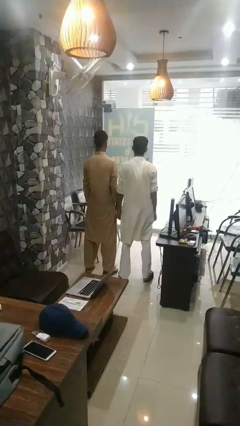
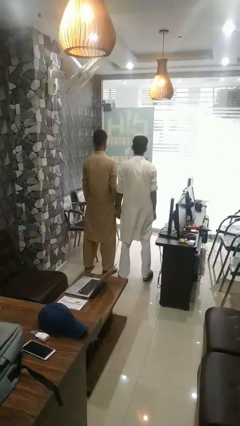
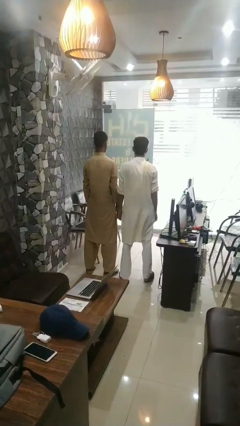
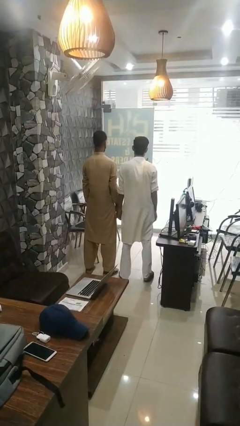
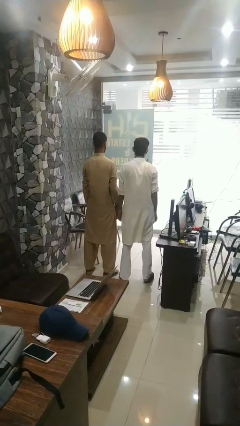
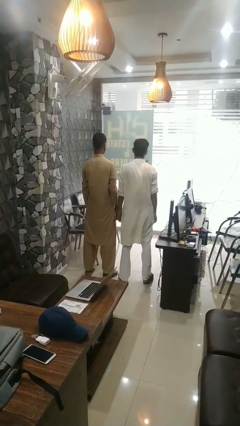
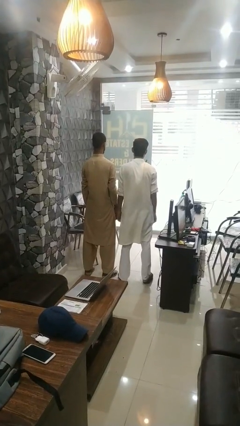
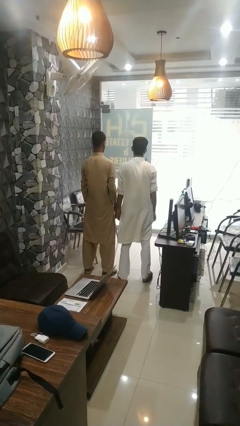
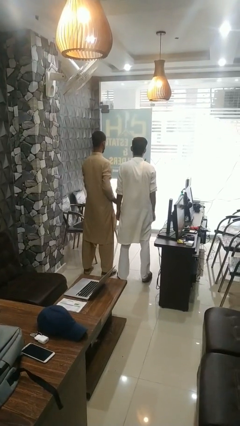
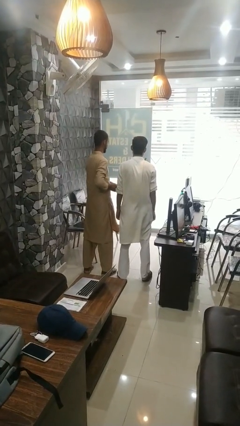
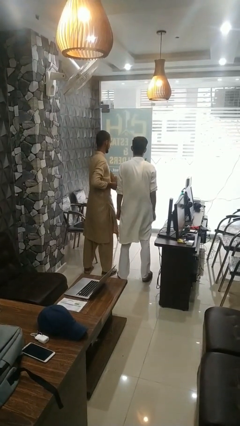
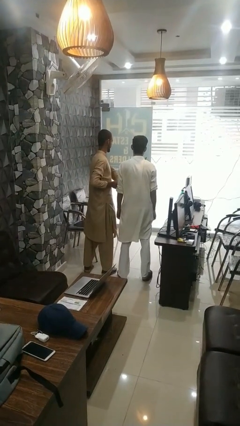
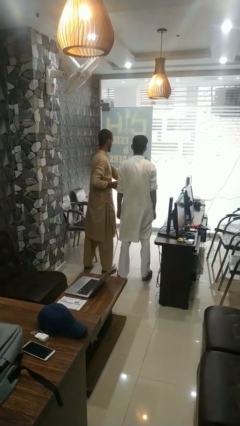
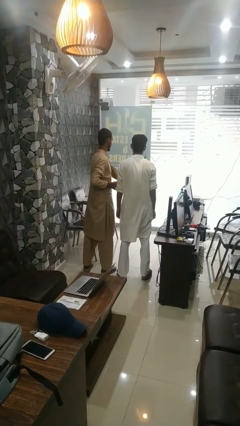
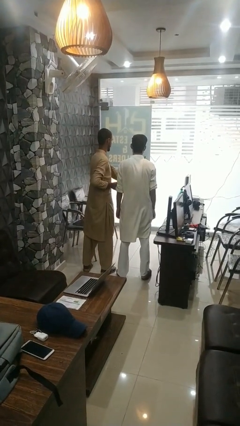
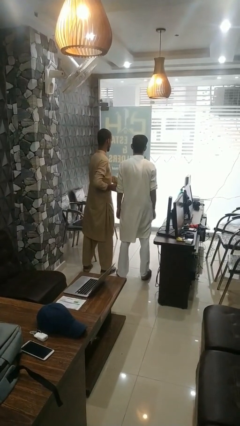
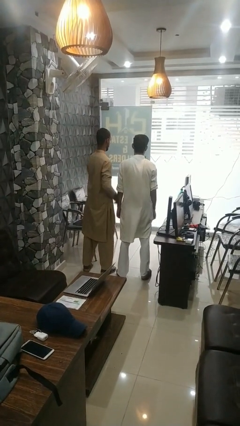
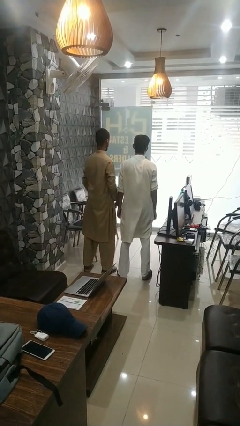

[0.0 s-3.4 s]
person tickles person

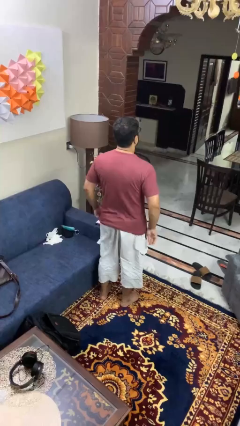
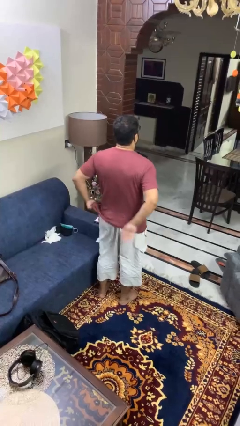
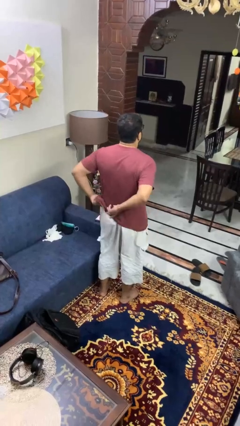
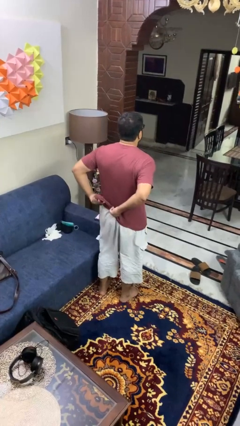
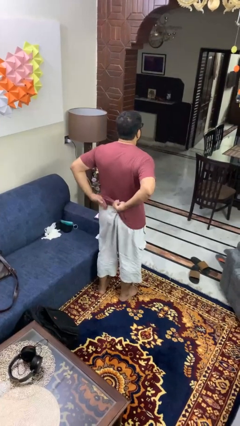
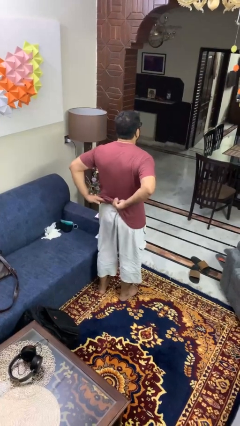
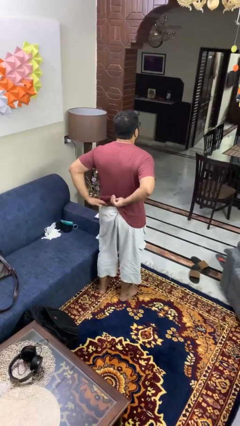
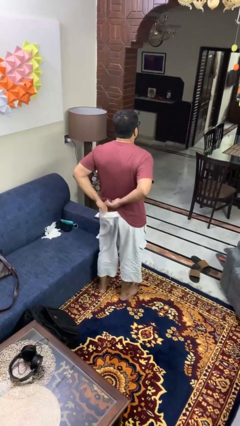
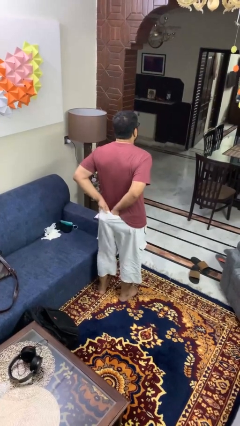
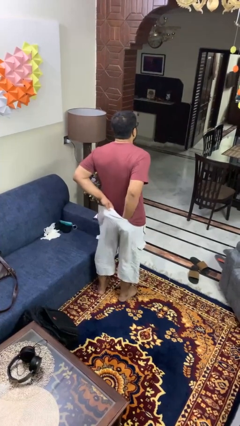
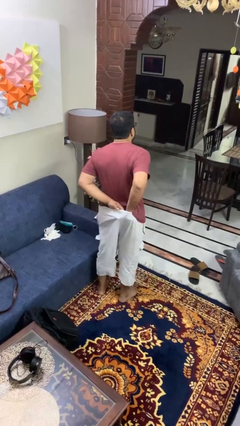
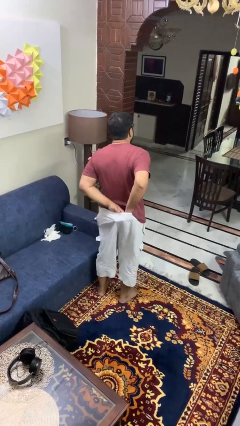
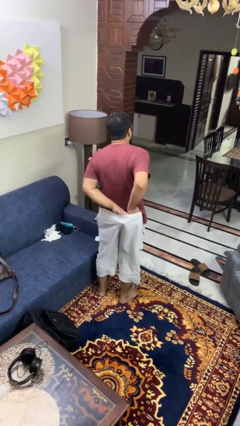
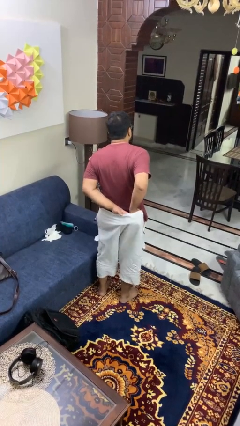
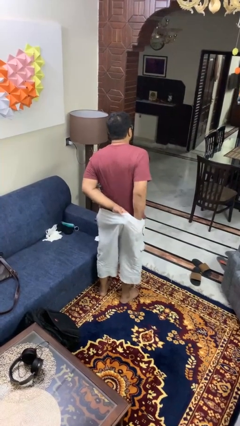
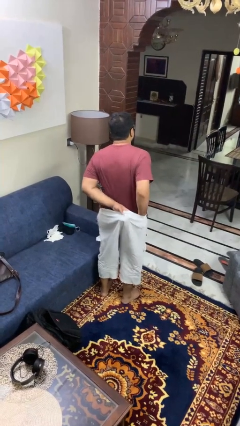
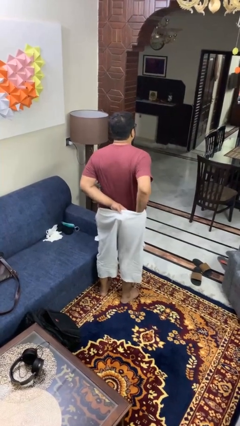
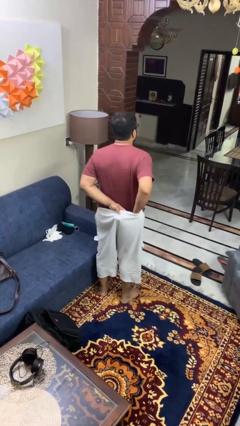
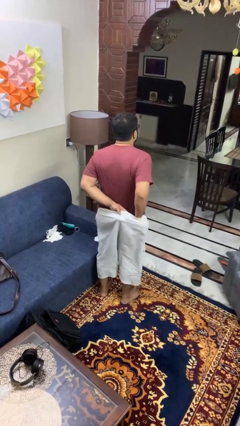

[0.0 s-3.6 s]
person tucks in shirt

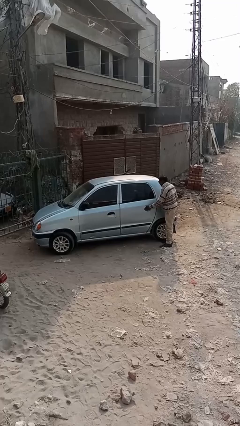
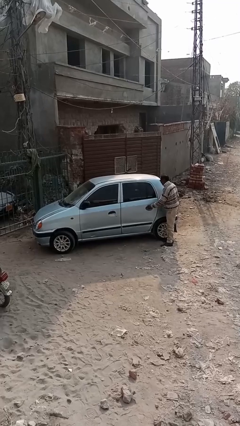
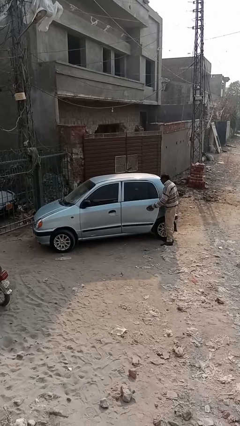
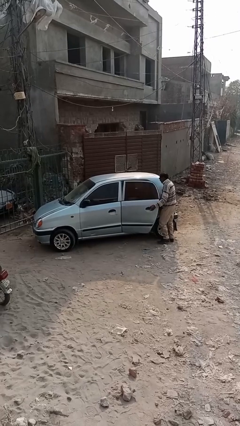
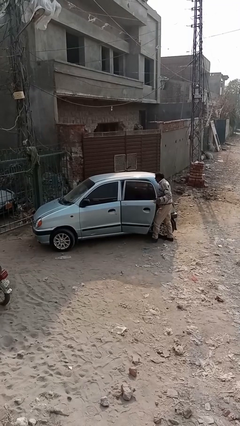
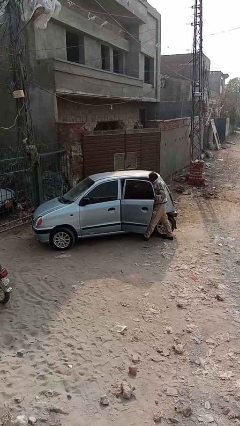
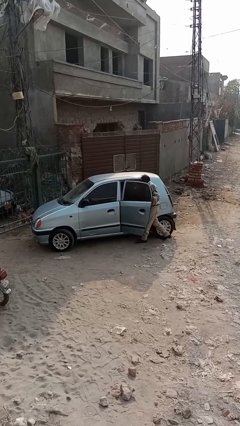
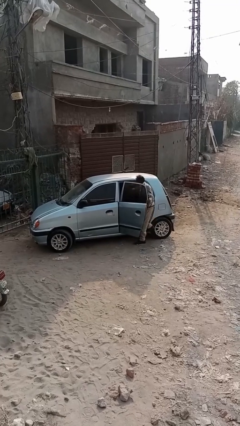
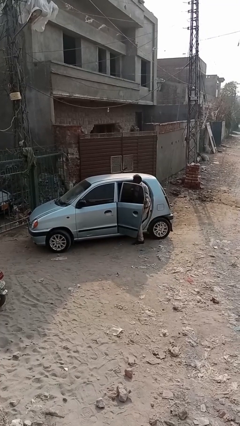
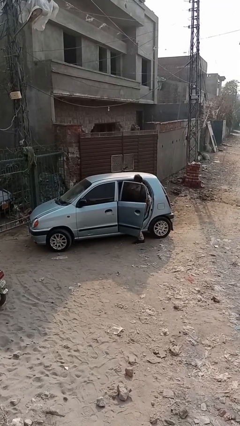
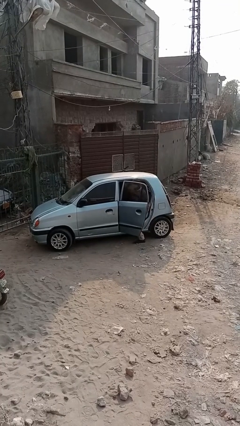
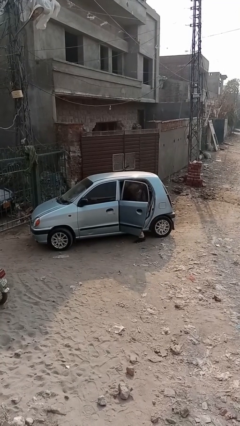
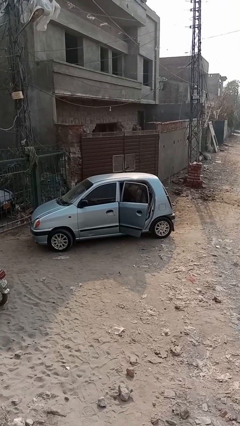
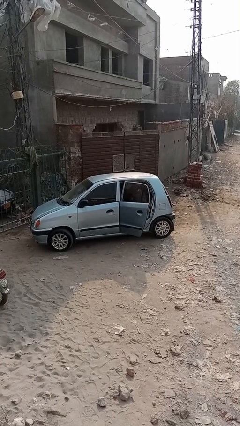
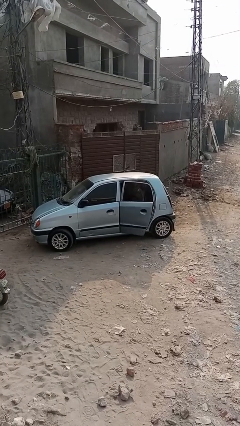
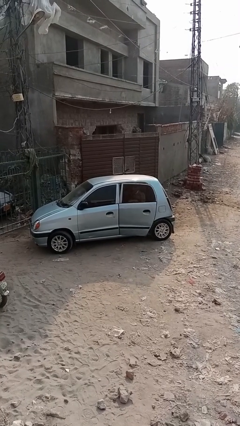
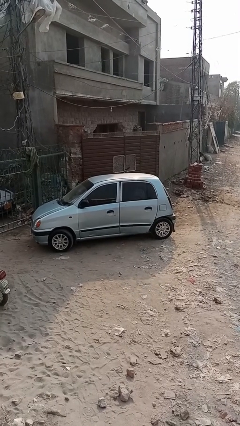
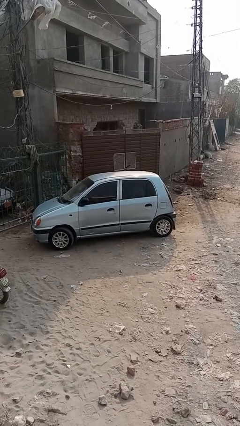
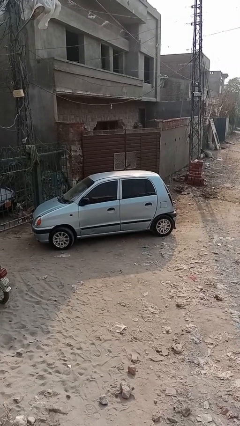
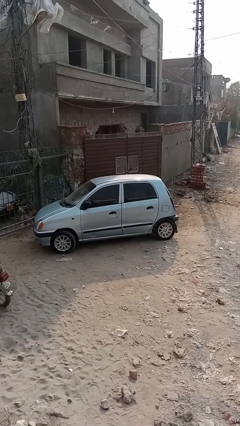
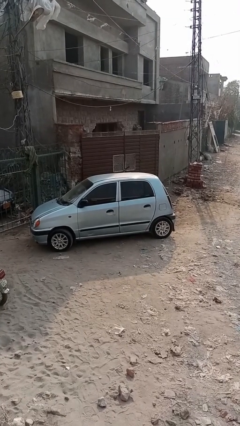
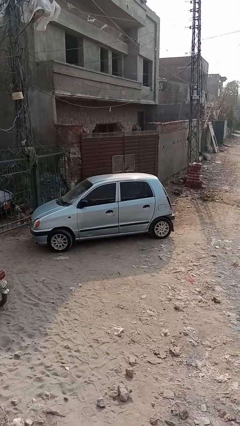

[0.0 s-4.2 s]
car picks up person

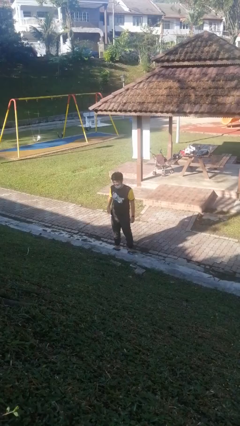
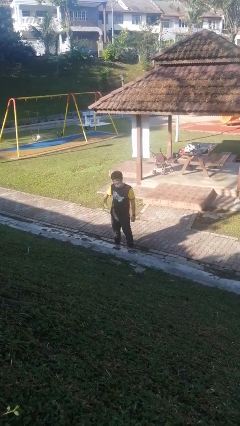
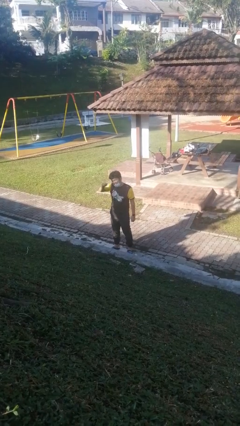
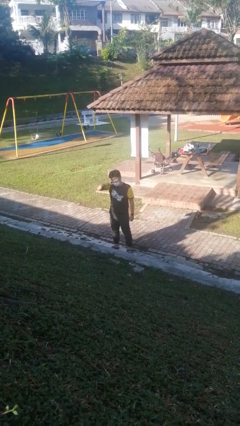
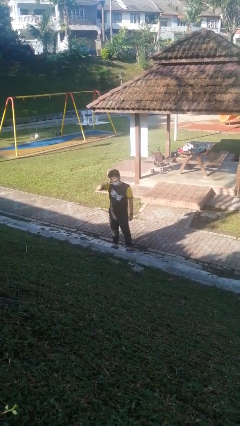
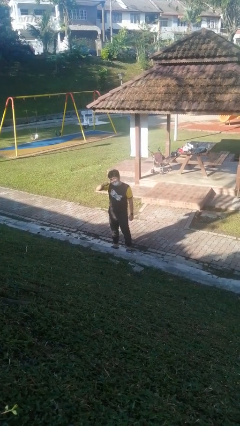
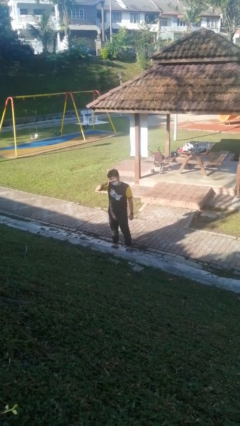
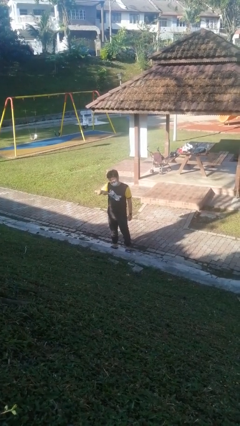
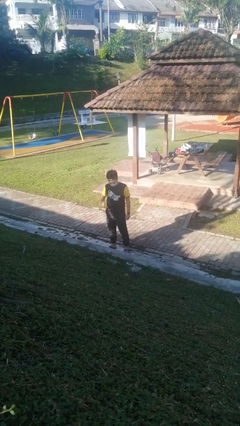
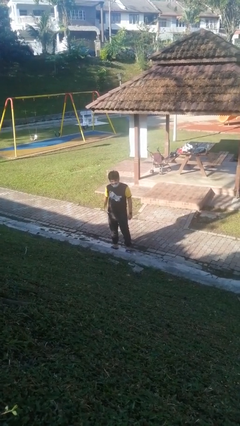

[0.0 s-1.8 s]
person brushes teeth

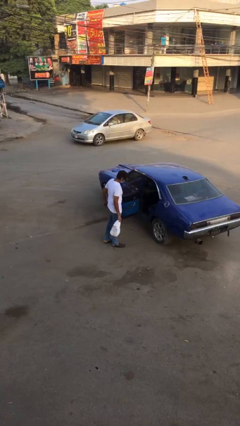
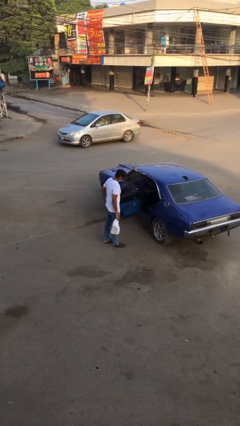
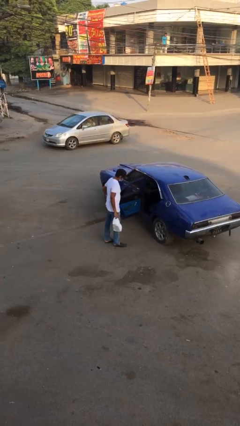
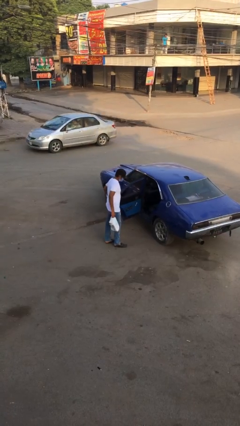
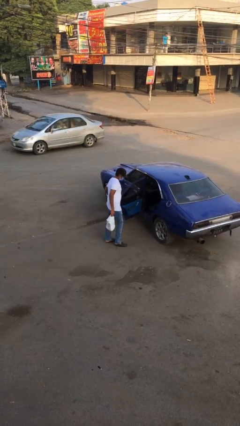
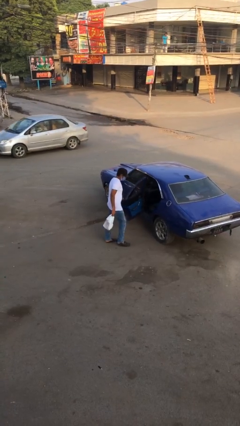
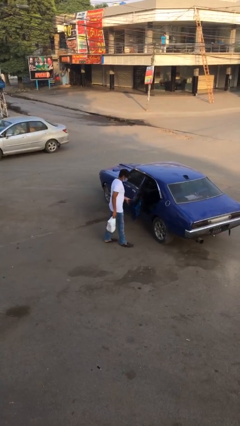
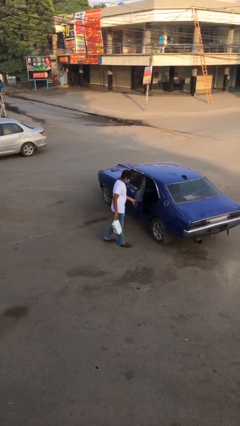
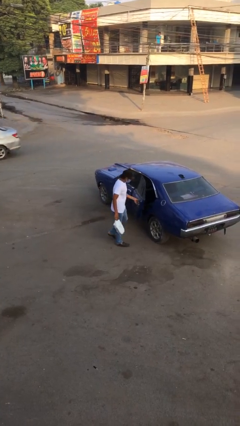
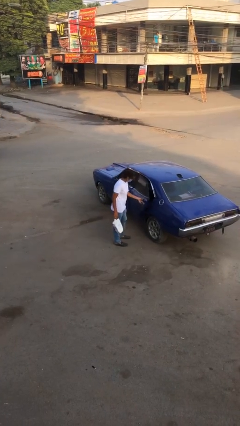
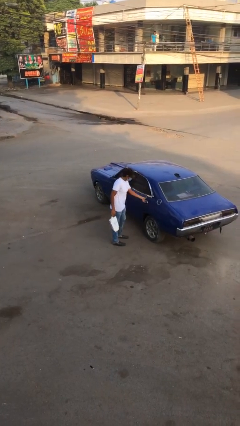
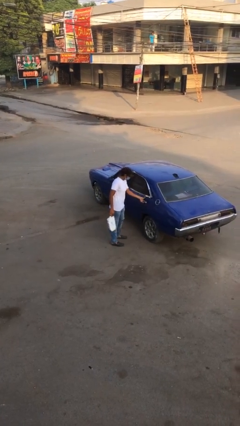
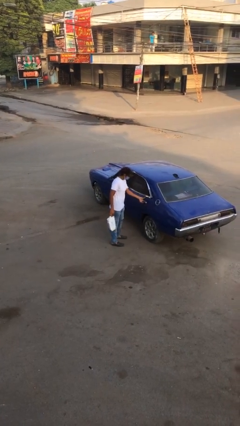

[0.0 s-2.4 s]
person closes car door

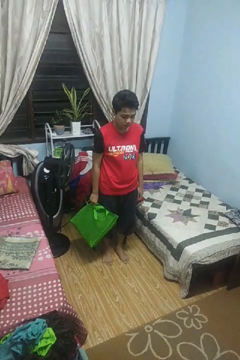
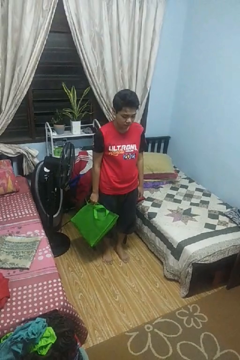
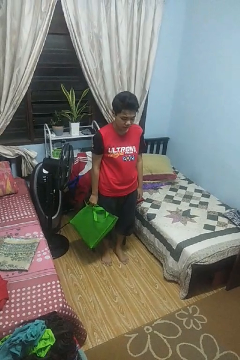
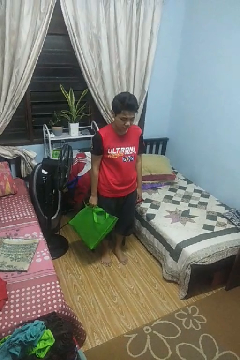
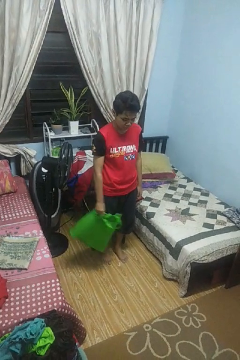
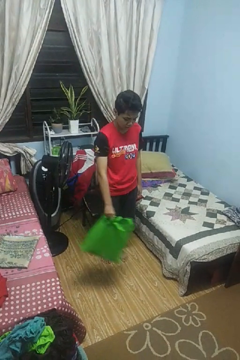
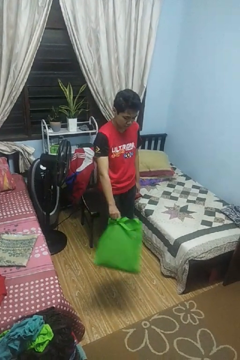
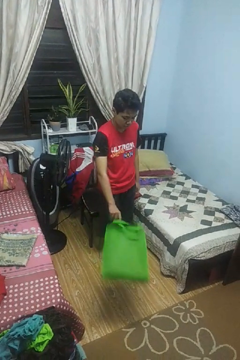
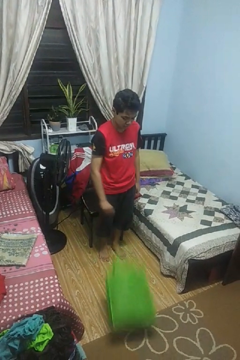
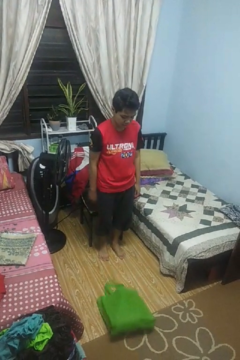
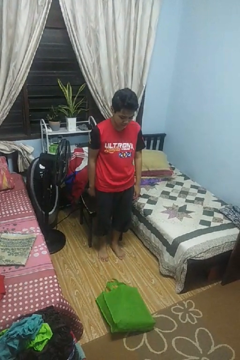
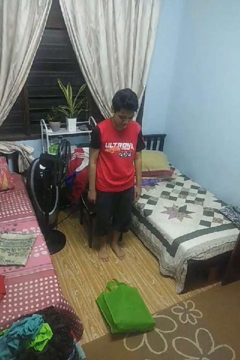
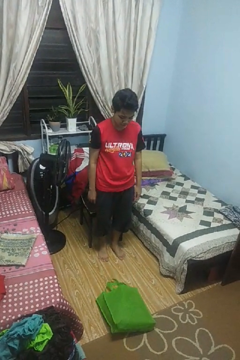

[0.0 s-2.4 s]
person throws object to ground
